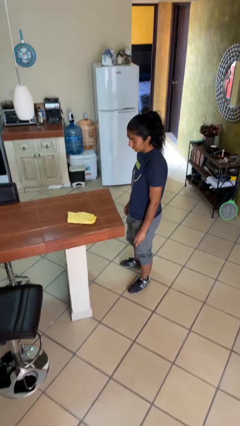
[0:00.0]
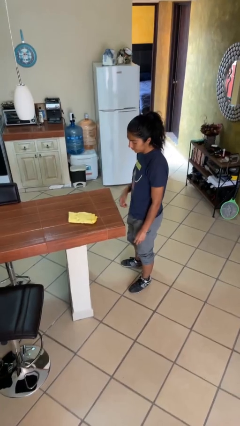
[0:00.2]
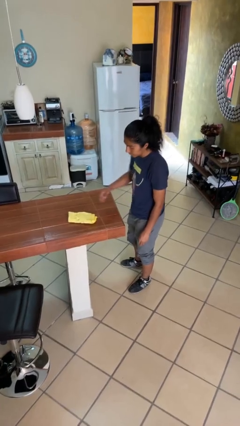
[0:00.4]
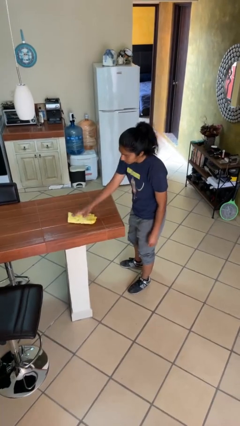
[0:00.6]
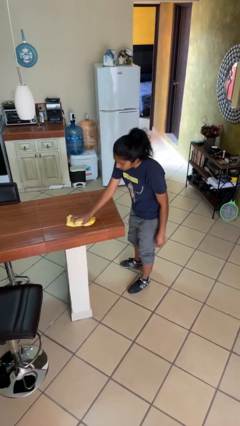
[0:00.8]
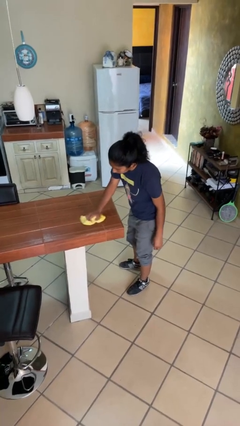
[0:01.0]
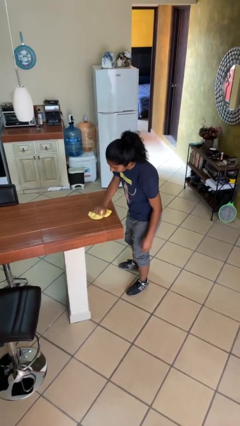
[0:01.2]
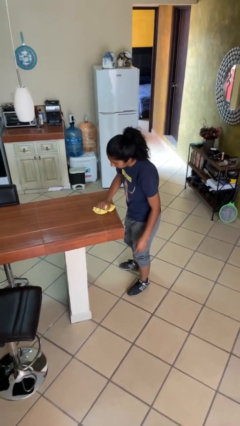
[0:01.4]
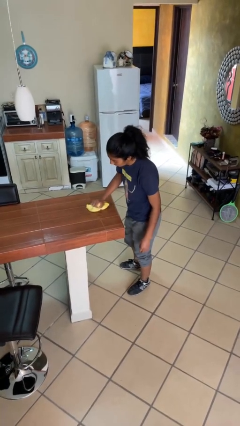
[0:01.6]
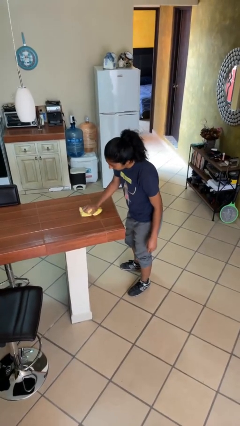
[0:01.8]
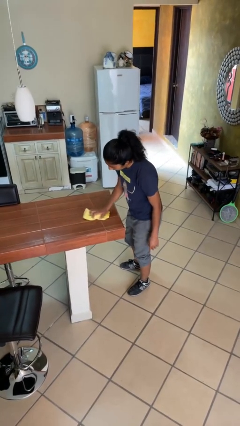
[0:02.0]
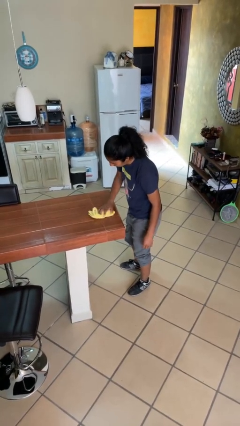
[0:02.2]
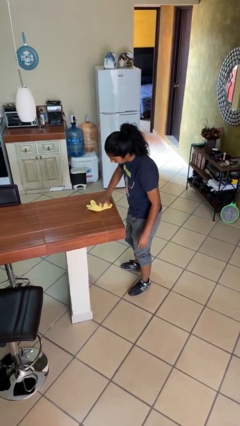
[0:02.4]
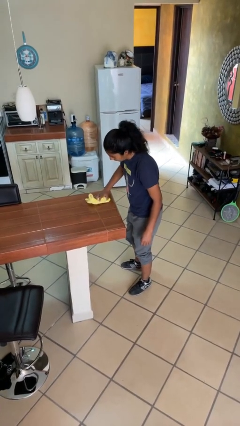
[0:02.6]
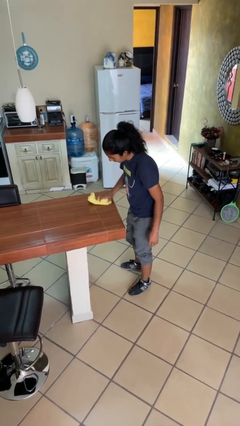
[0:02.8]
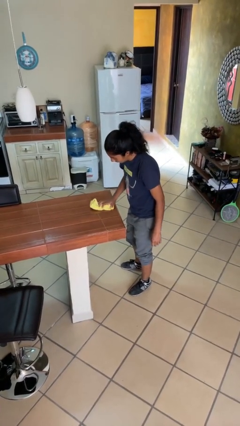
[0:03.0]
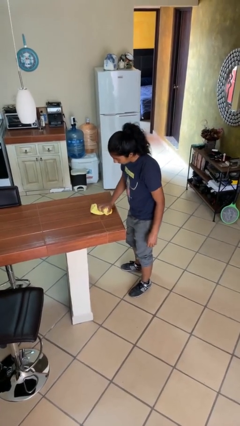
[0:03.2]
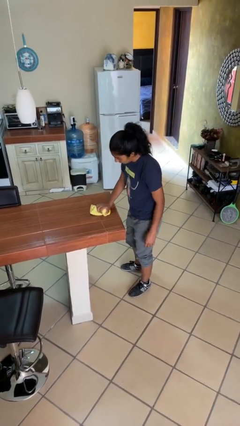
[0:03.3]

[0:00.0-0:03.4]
person cleans table with rag

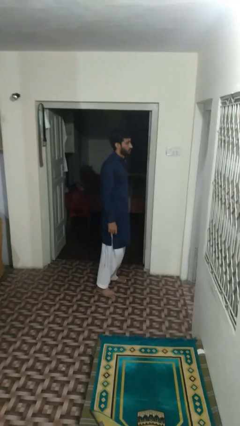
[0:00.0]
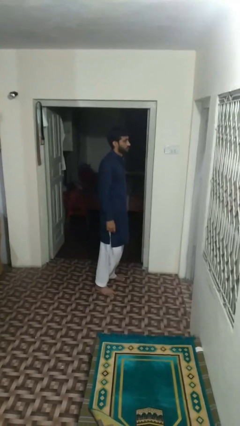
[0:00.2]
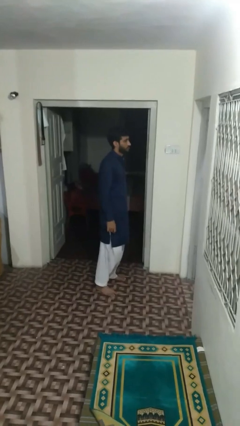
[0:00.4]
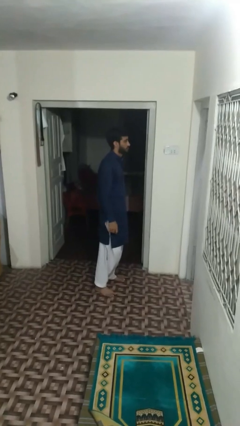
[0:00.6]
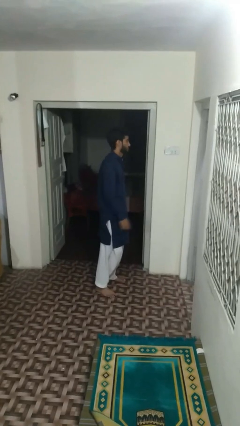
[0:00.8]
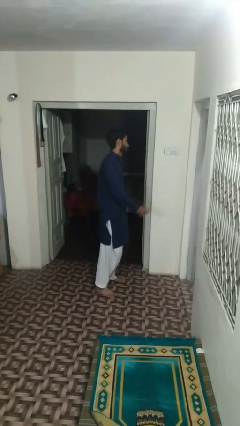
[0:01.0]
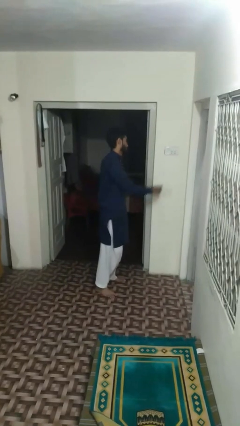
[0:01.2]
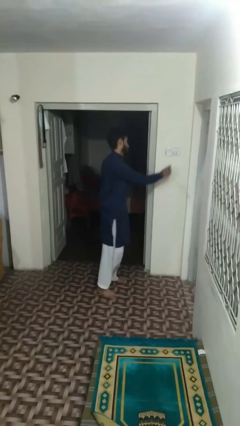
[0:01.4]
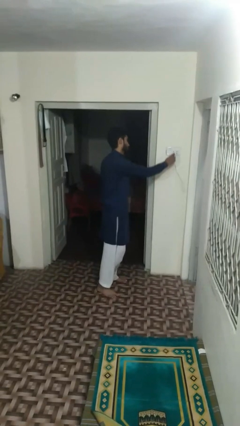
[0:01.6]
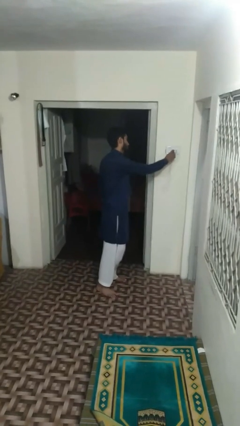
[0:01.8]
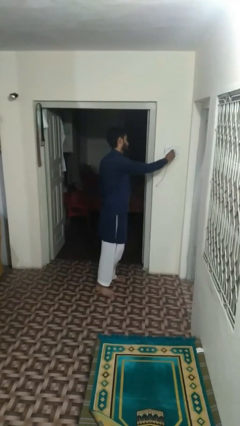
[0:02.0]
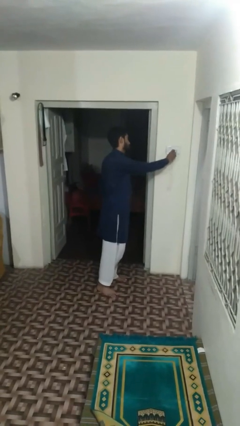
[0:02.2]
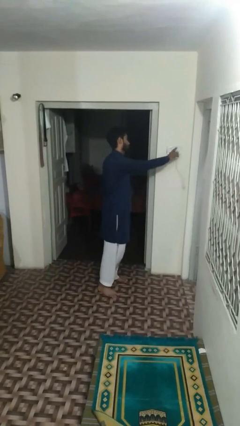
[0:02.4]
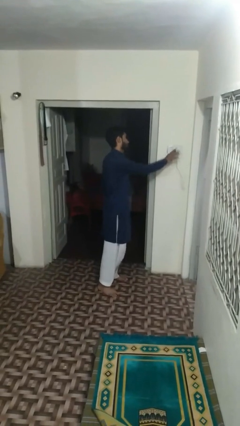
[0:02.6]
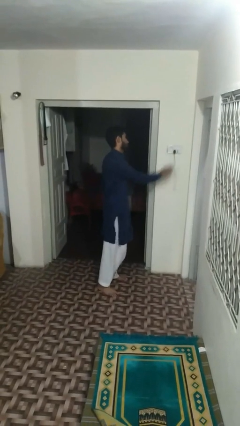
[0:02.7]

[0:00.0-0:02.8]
person plugs into electrical socket

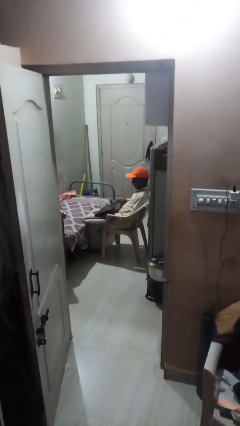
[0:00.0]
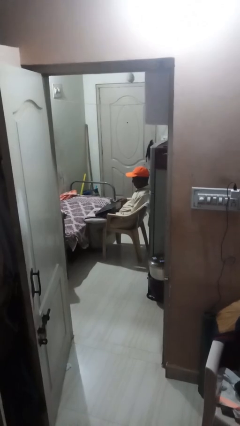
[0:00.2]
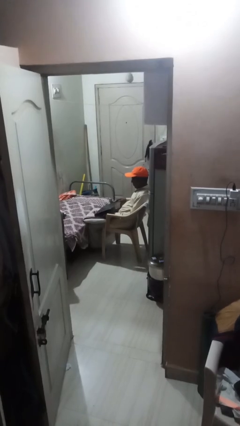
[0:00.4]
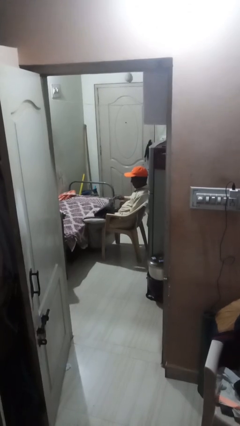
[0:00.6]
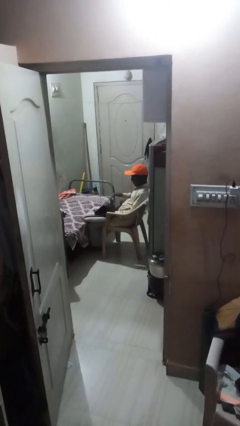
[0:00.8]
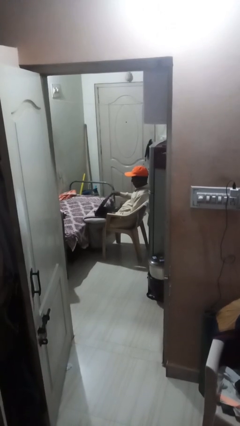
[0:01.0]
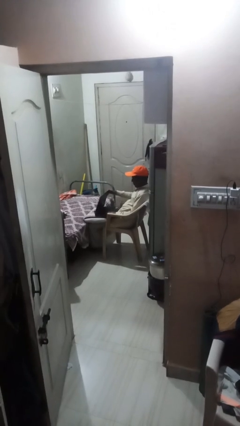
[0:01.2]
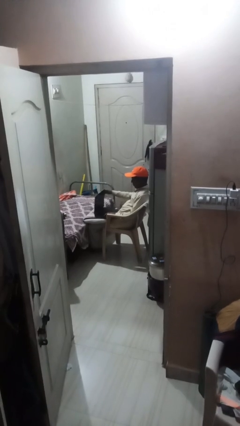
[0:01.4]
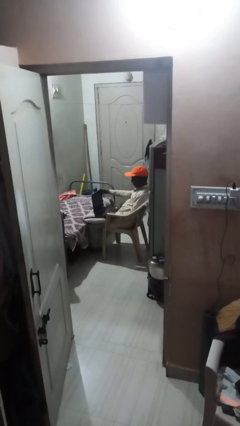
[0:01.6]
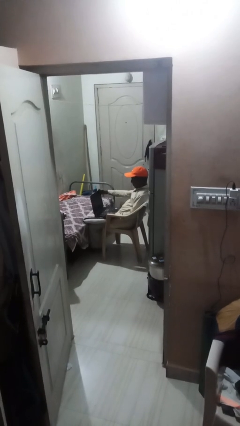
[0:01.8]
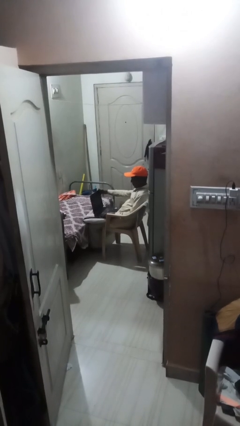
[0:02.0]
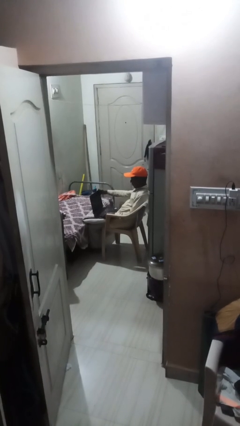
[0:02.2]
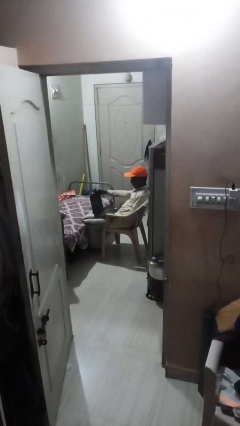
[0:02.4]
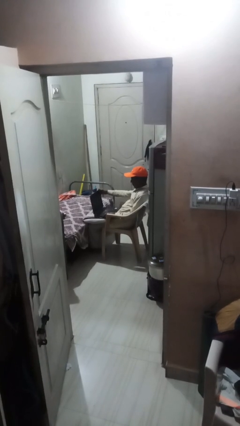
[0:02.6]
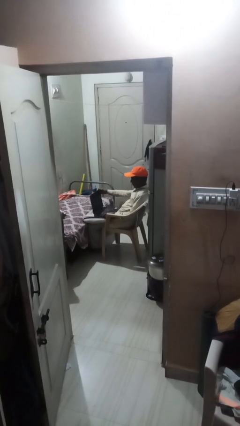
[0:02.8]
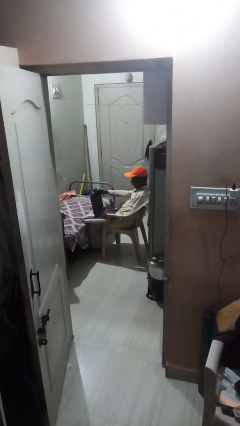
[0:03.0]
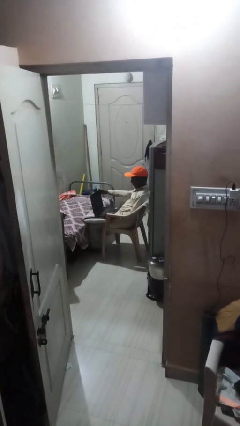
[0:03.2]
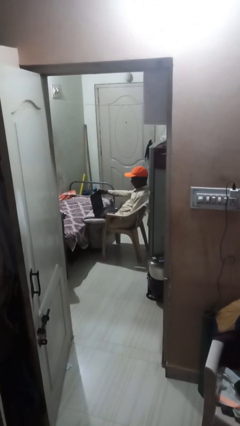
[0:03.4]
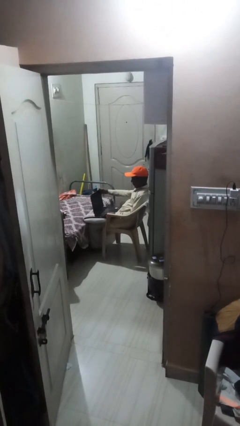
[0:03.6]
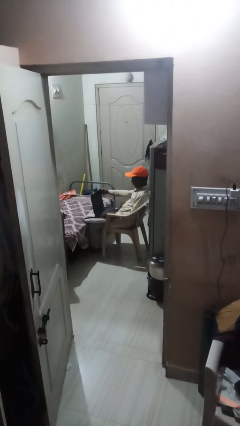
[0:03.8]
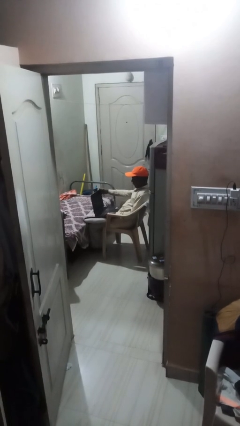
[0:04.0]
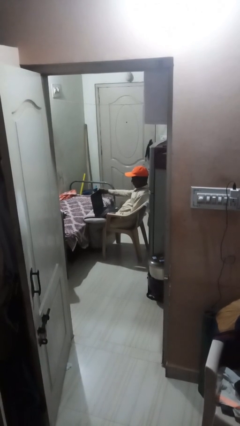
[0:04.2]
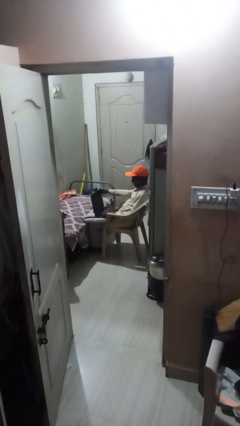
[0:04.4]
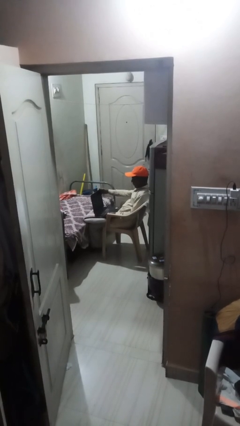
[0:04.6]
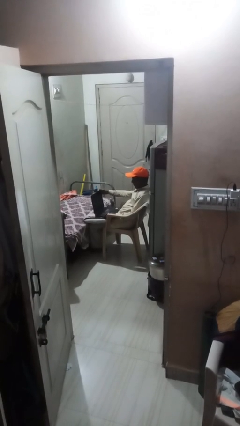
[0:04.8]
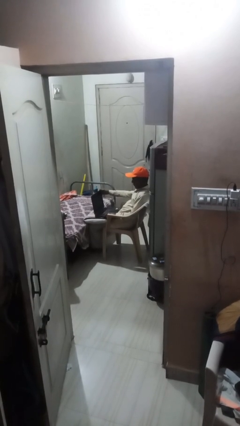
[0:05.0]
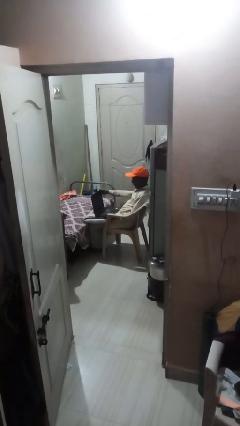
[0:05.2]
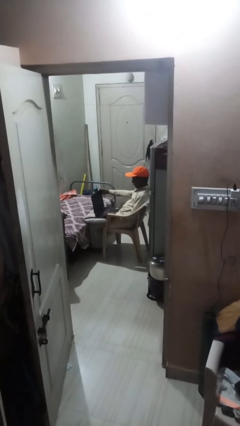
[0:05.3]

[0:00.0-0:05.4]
person interacts with laptop

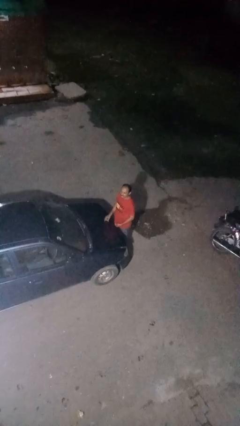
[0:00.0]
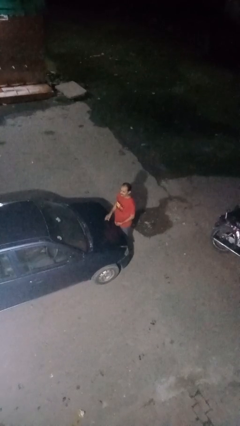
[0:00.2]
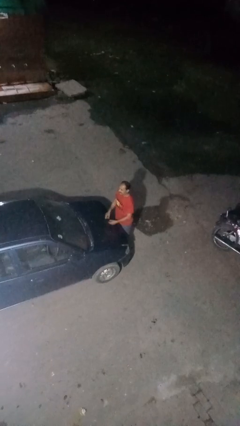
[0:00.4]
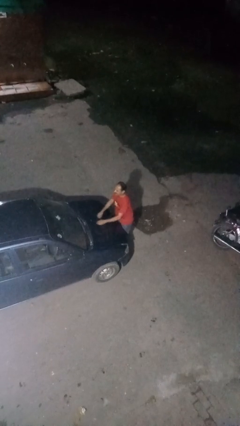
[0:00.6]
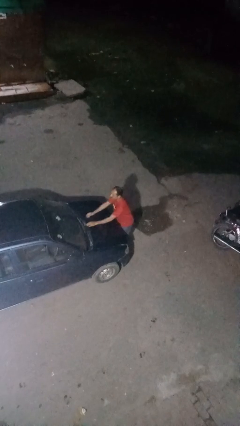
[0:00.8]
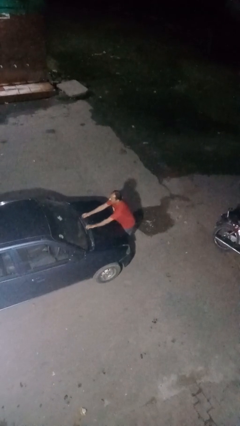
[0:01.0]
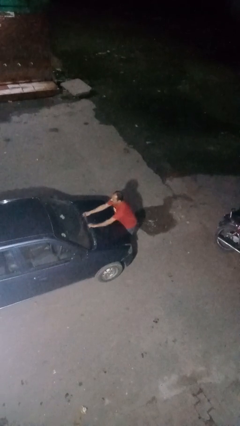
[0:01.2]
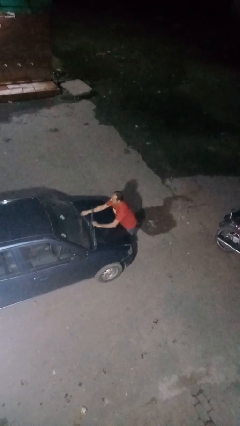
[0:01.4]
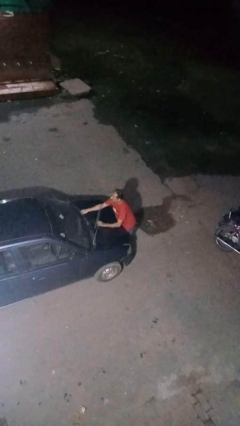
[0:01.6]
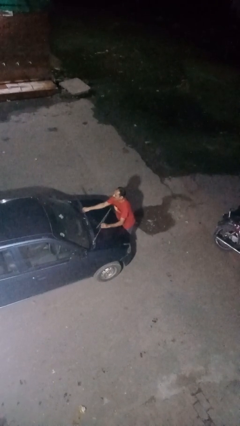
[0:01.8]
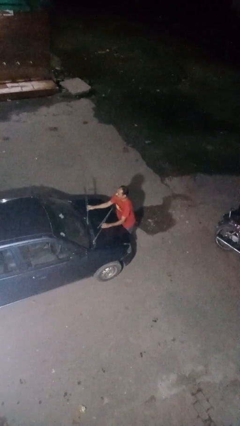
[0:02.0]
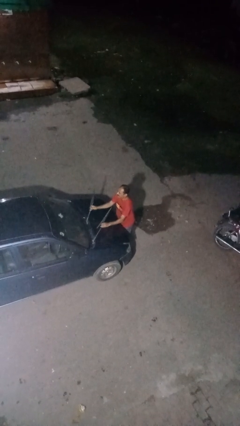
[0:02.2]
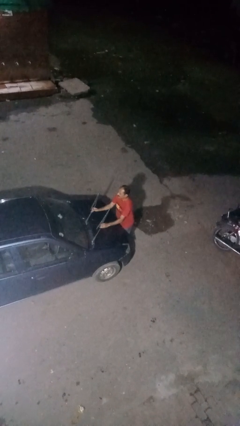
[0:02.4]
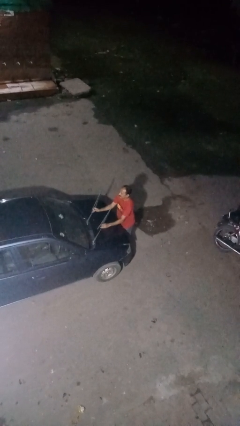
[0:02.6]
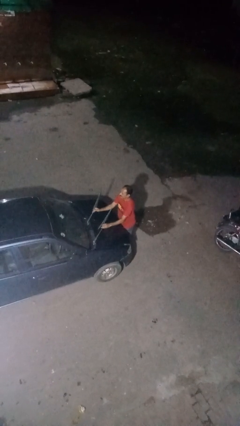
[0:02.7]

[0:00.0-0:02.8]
person flips up car wipers

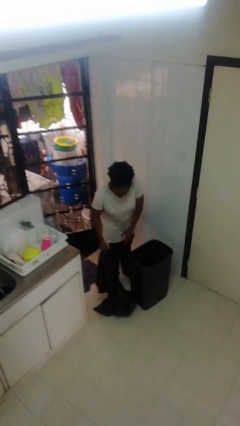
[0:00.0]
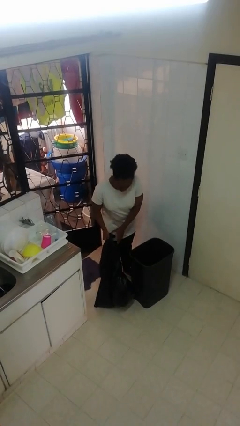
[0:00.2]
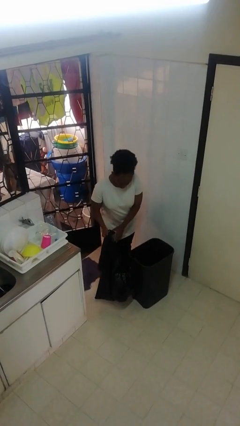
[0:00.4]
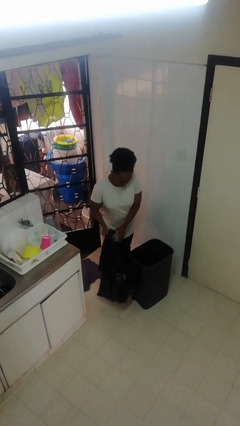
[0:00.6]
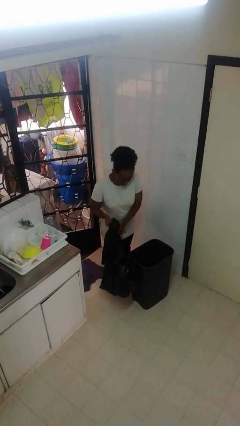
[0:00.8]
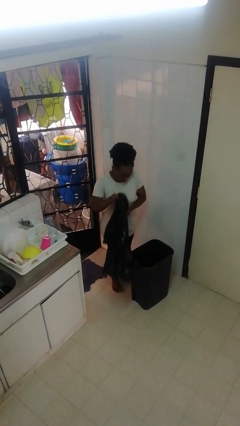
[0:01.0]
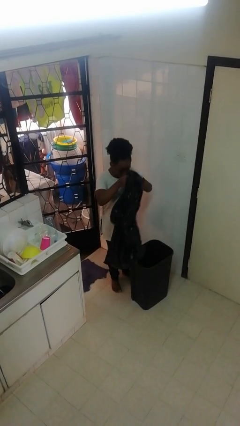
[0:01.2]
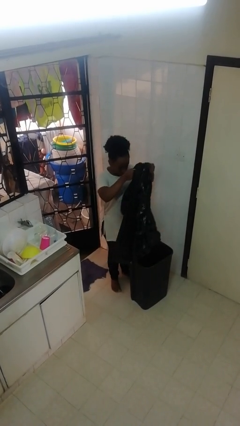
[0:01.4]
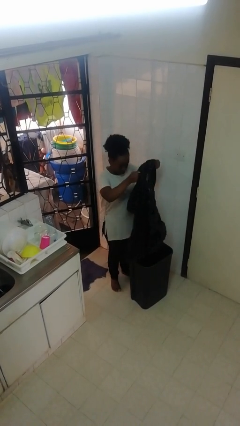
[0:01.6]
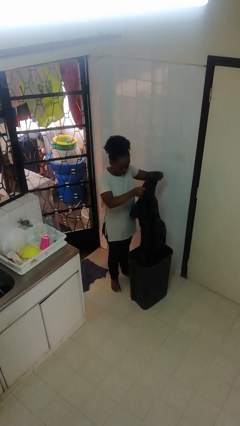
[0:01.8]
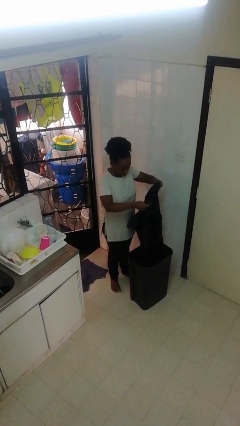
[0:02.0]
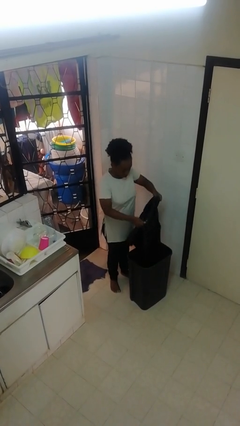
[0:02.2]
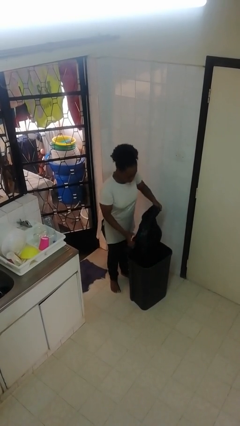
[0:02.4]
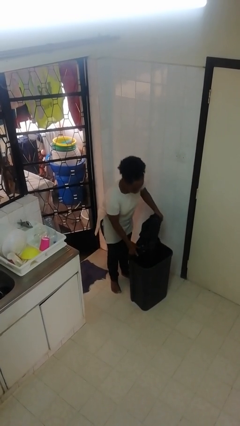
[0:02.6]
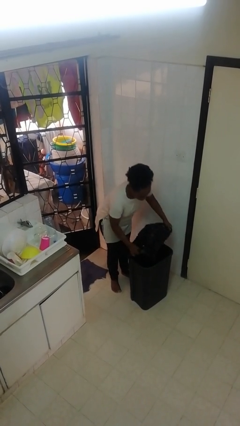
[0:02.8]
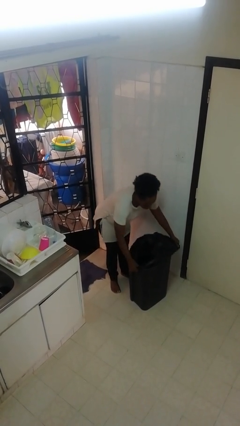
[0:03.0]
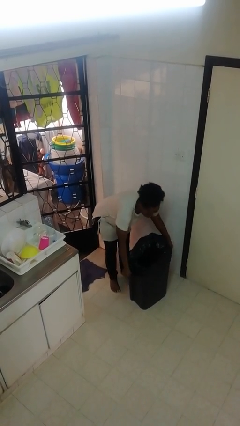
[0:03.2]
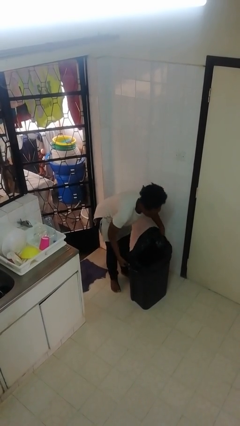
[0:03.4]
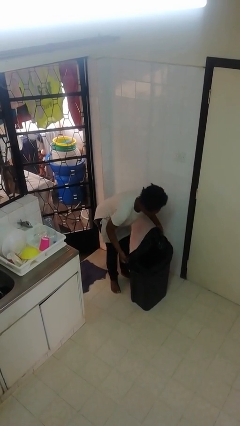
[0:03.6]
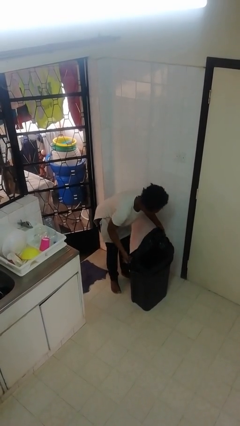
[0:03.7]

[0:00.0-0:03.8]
person inserts trashbag into trashcan
